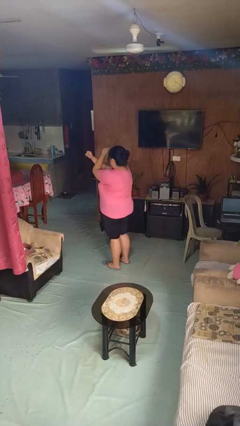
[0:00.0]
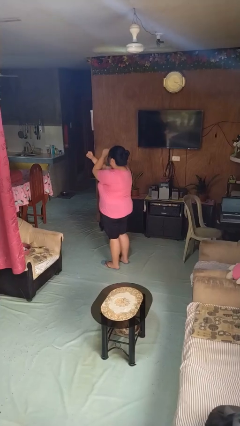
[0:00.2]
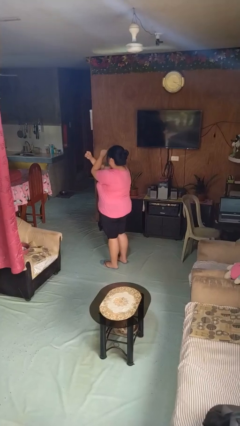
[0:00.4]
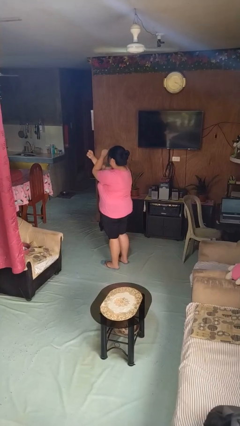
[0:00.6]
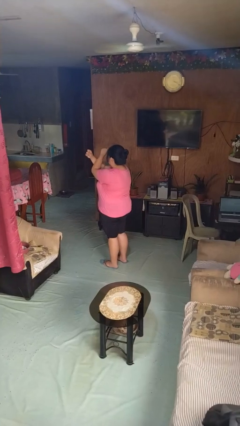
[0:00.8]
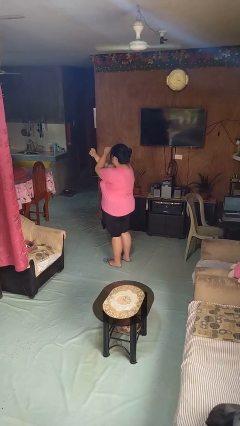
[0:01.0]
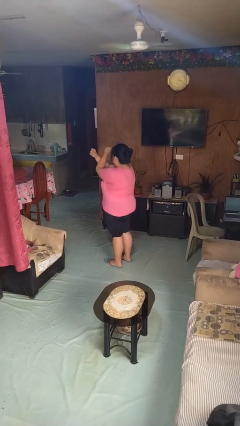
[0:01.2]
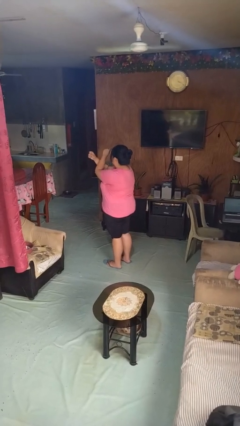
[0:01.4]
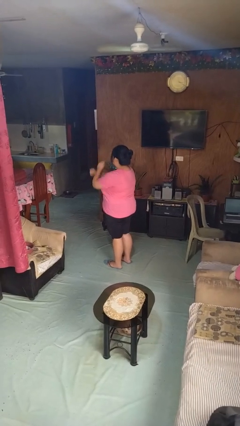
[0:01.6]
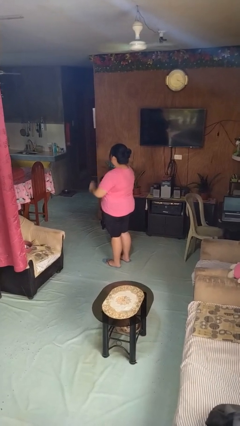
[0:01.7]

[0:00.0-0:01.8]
person gestures arms x

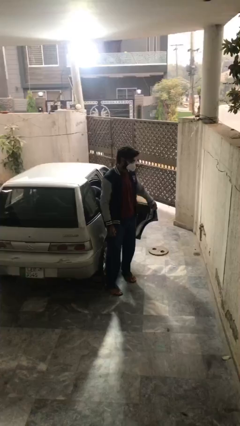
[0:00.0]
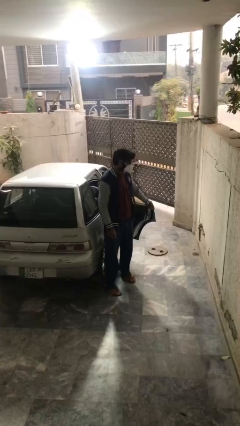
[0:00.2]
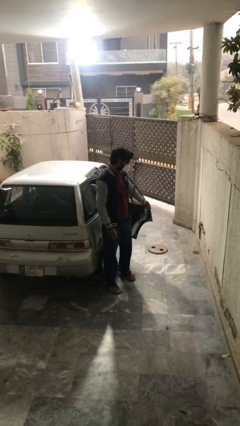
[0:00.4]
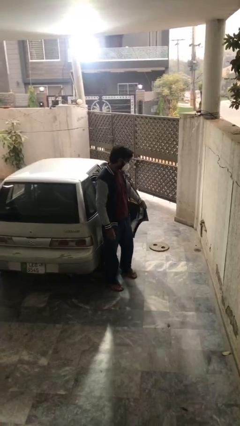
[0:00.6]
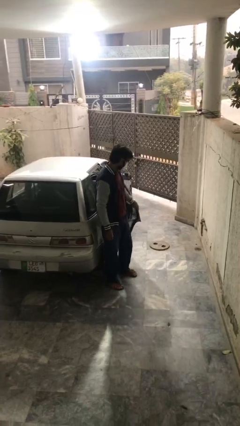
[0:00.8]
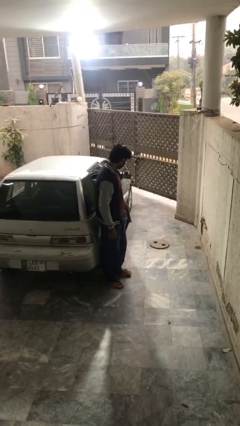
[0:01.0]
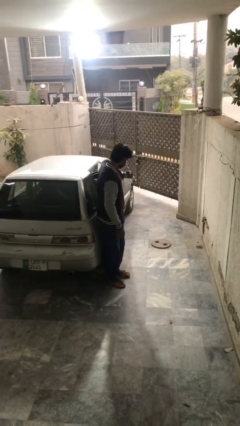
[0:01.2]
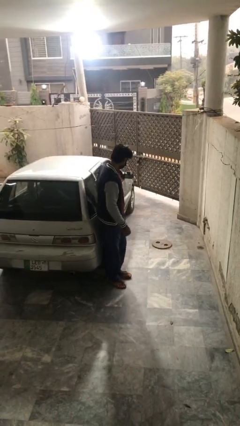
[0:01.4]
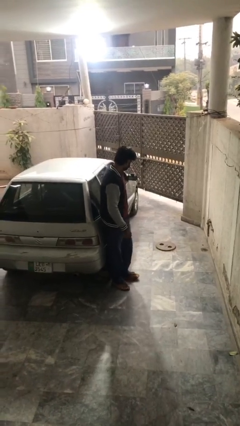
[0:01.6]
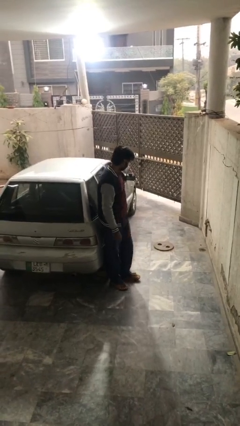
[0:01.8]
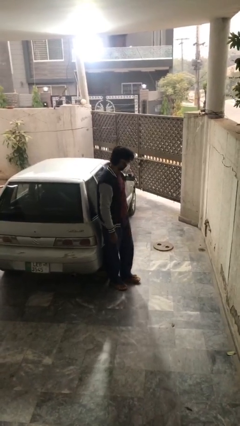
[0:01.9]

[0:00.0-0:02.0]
person closes car door

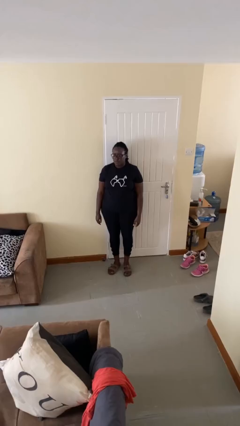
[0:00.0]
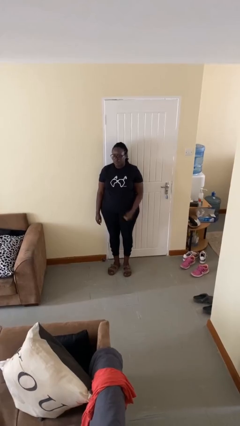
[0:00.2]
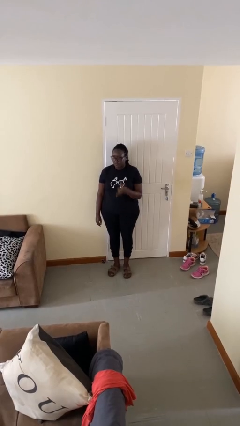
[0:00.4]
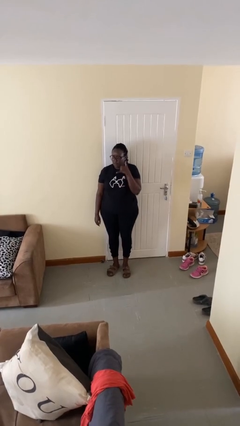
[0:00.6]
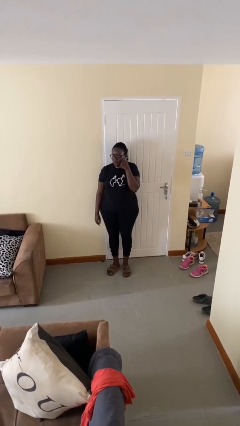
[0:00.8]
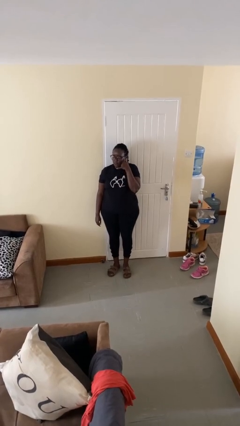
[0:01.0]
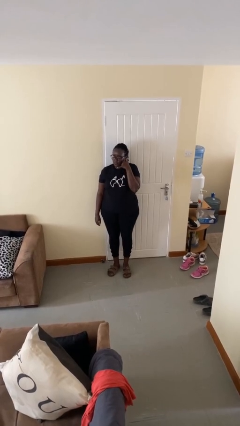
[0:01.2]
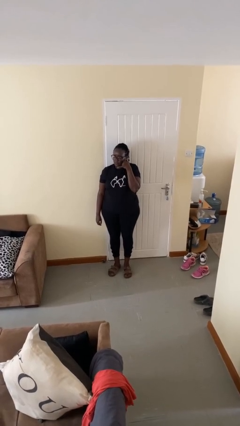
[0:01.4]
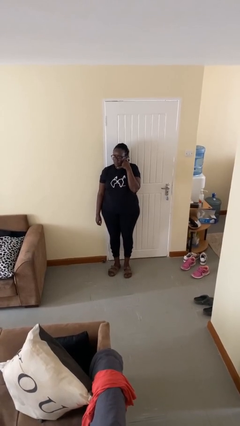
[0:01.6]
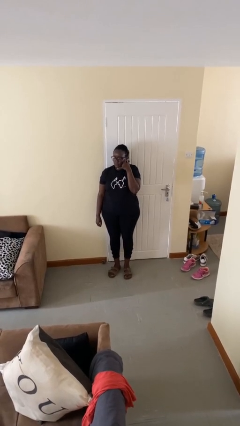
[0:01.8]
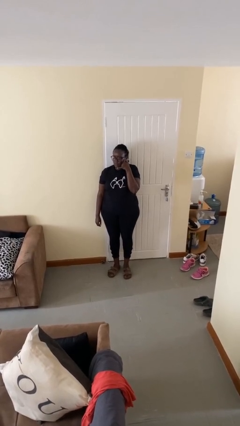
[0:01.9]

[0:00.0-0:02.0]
person gestures call me

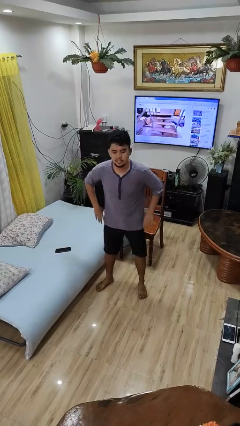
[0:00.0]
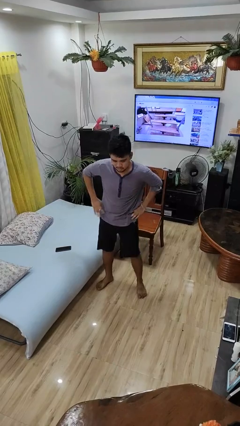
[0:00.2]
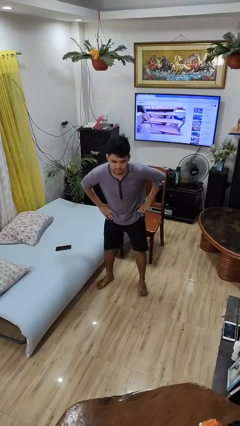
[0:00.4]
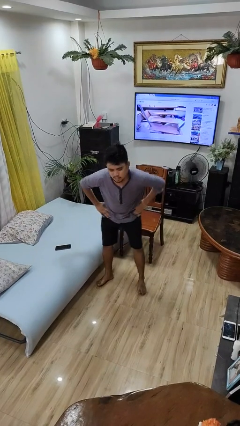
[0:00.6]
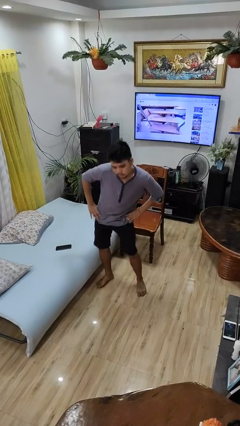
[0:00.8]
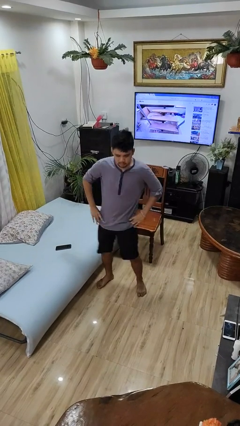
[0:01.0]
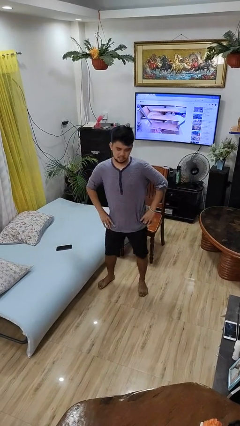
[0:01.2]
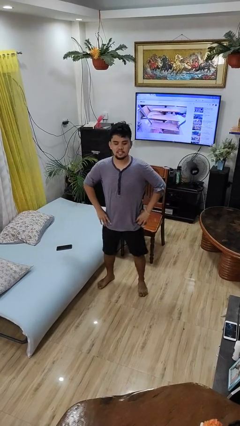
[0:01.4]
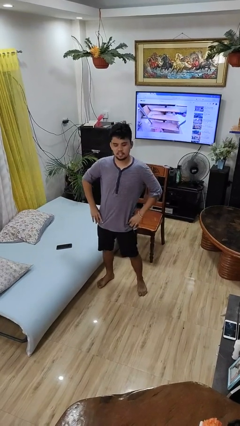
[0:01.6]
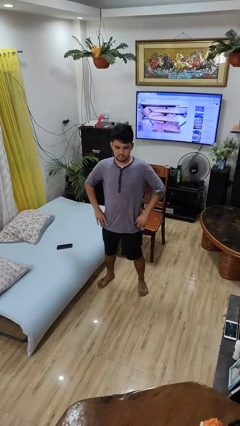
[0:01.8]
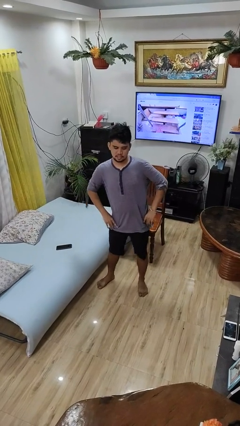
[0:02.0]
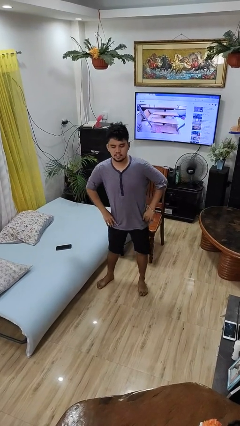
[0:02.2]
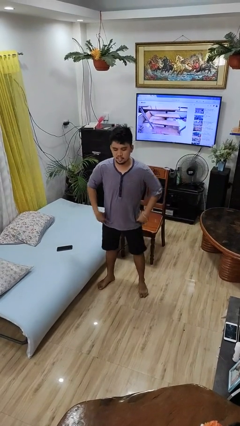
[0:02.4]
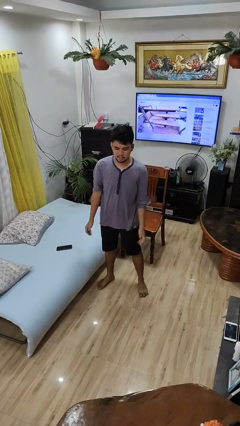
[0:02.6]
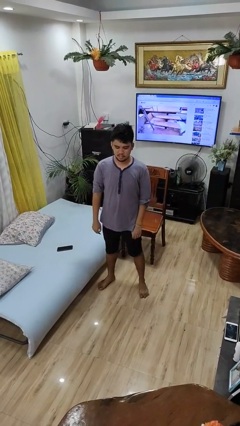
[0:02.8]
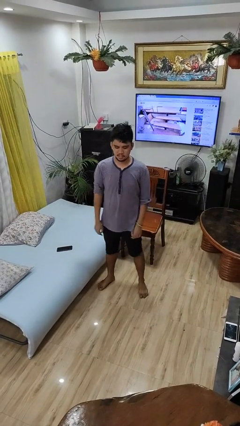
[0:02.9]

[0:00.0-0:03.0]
person wiggles hips

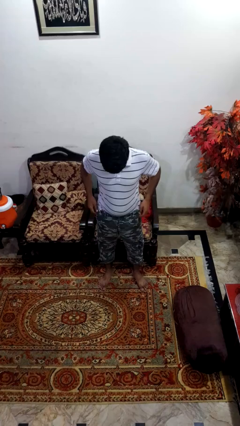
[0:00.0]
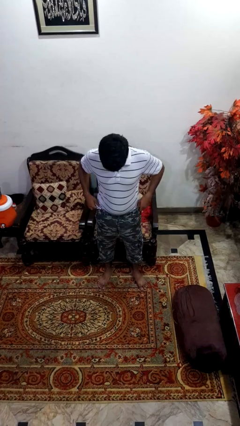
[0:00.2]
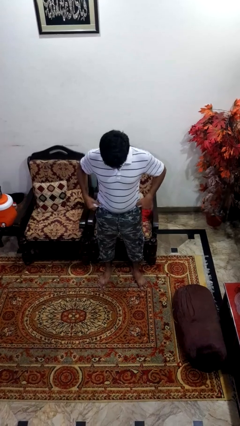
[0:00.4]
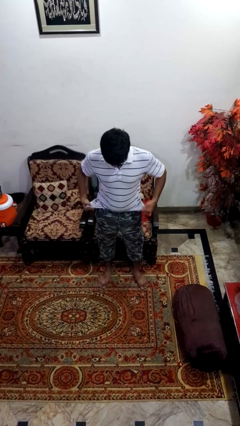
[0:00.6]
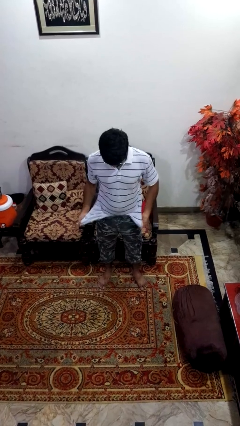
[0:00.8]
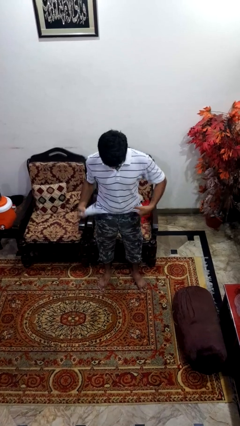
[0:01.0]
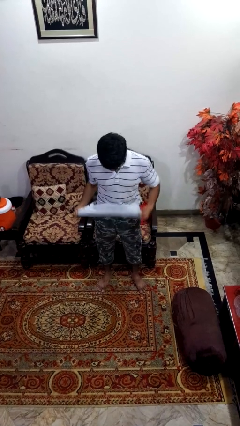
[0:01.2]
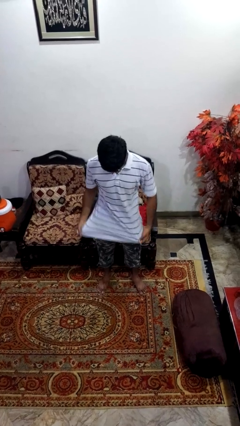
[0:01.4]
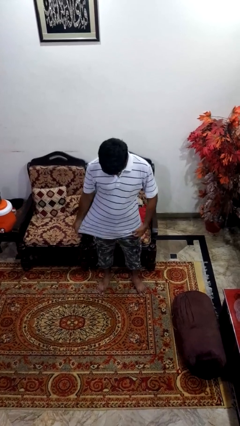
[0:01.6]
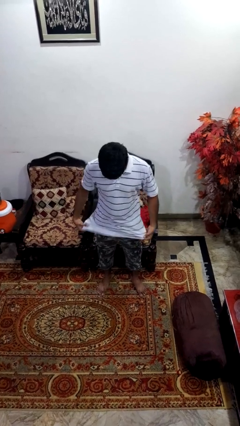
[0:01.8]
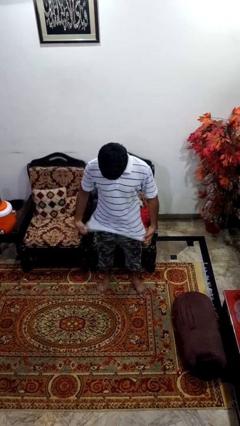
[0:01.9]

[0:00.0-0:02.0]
person untucks shirt

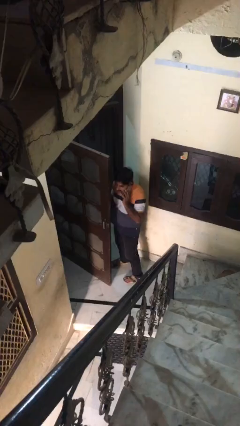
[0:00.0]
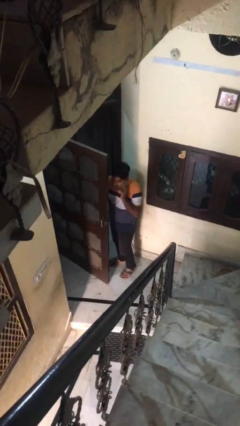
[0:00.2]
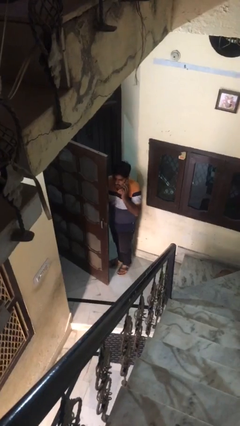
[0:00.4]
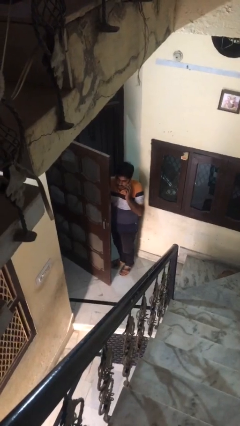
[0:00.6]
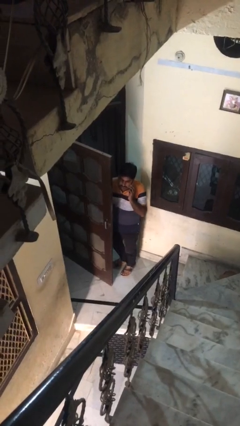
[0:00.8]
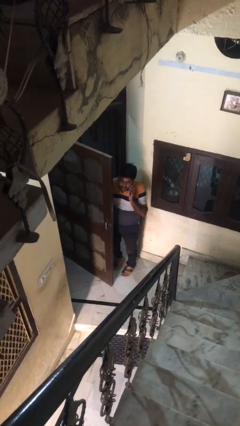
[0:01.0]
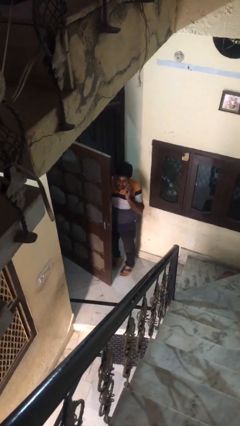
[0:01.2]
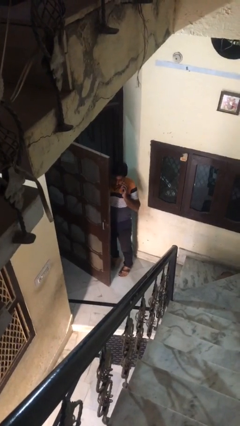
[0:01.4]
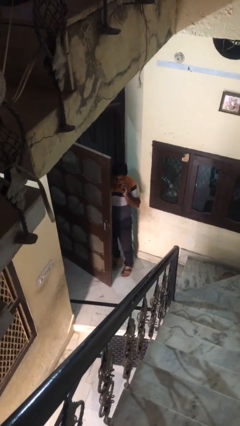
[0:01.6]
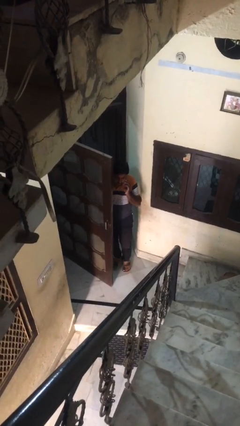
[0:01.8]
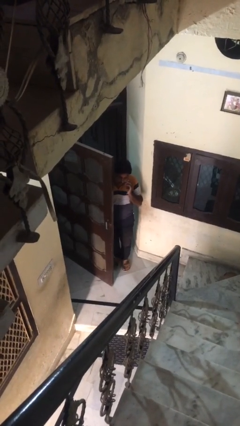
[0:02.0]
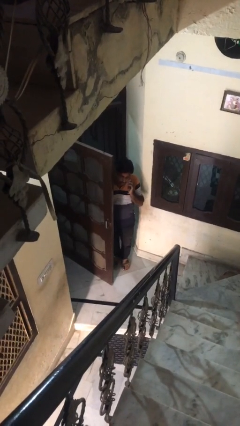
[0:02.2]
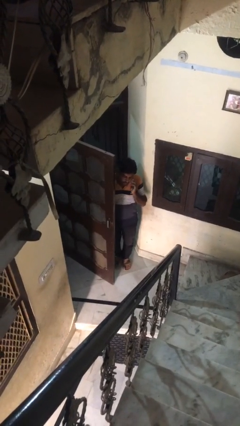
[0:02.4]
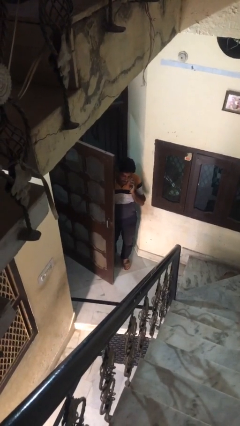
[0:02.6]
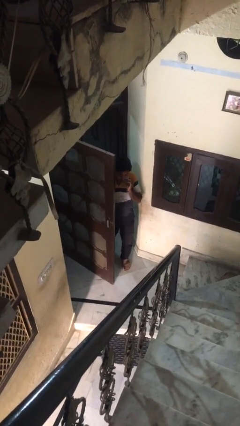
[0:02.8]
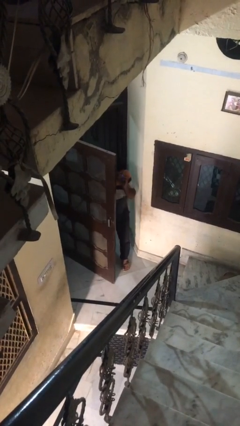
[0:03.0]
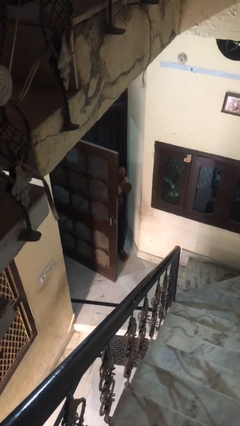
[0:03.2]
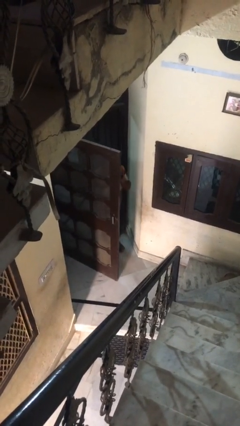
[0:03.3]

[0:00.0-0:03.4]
person exits scene through structure

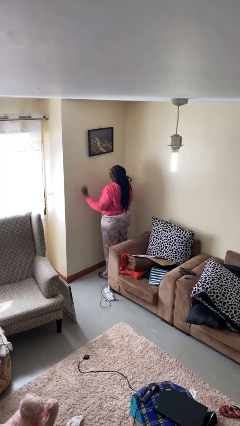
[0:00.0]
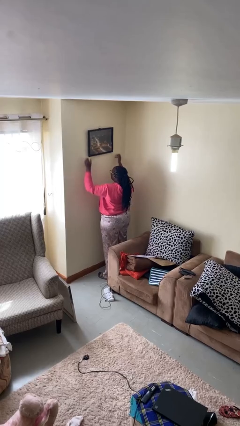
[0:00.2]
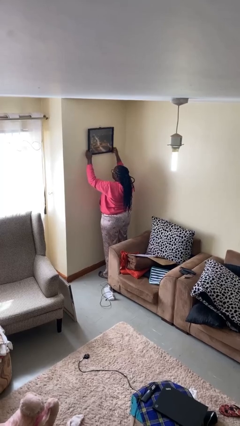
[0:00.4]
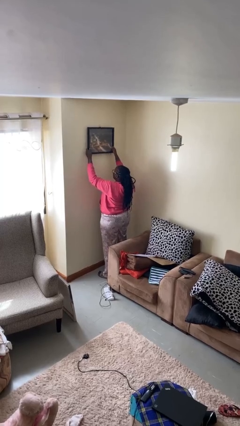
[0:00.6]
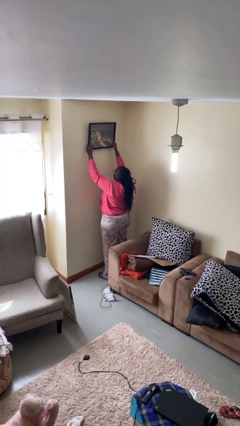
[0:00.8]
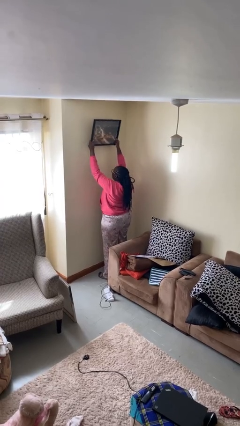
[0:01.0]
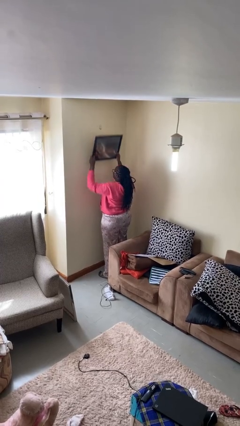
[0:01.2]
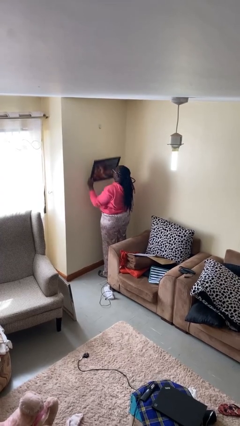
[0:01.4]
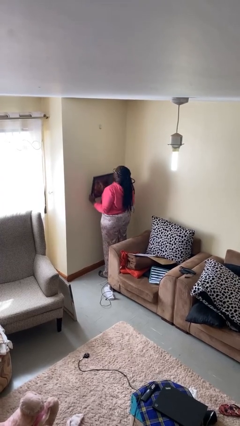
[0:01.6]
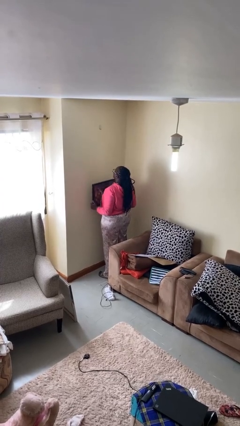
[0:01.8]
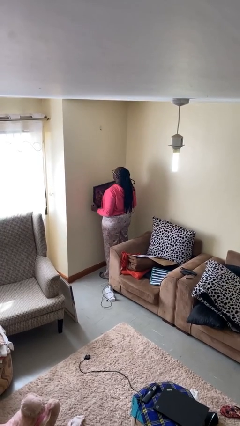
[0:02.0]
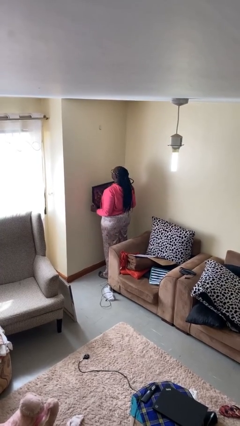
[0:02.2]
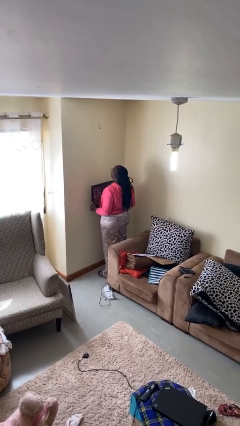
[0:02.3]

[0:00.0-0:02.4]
person takes down picture frame
